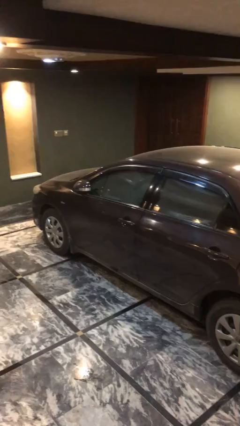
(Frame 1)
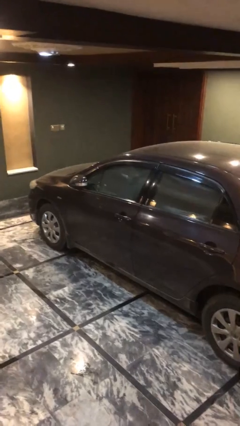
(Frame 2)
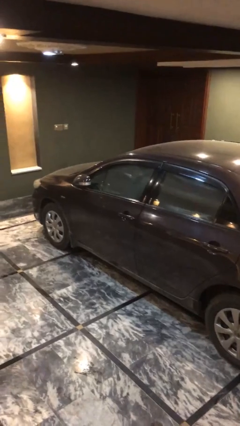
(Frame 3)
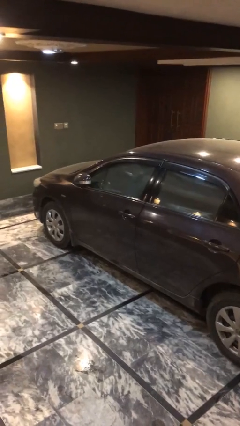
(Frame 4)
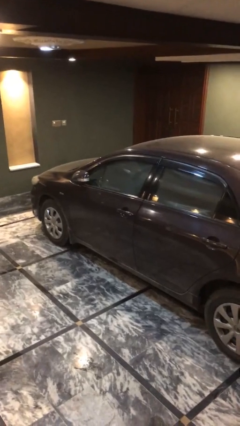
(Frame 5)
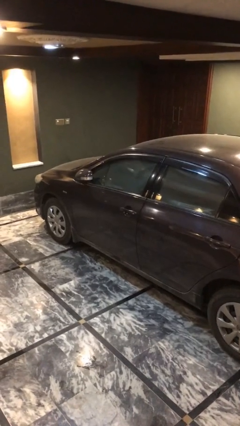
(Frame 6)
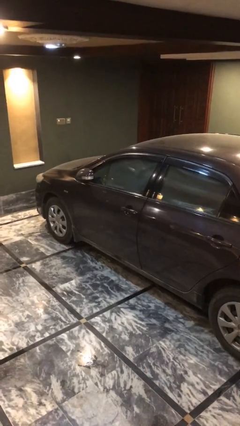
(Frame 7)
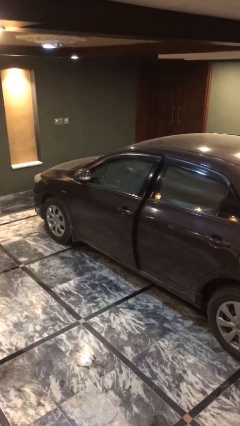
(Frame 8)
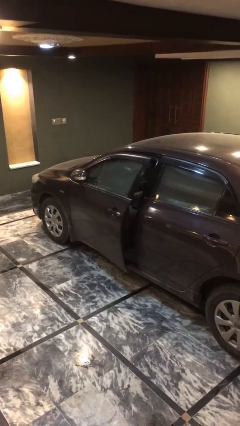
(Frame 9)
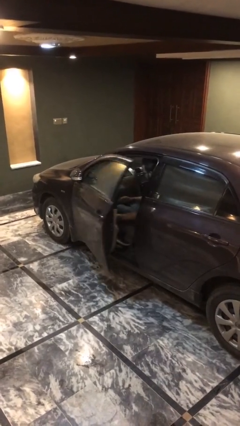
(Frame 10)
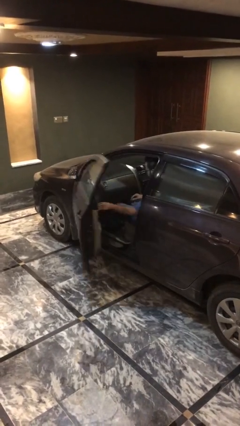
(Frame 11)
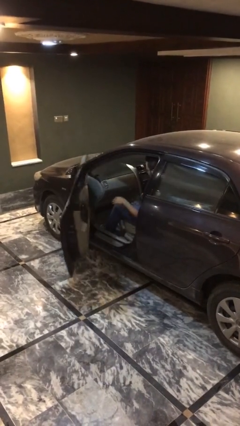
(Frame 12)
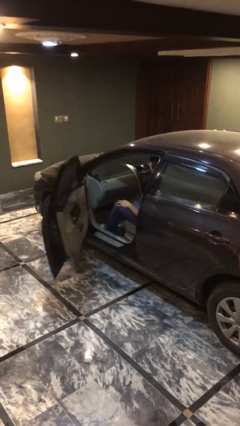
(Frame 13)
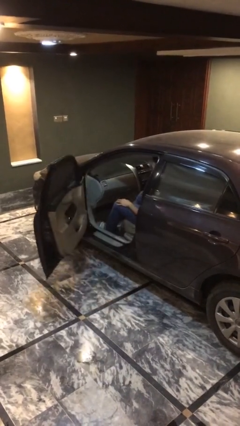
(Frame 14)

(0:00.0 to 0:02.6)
person opens car door

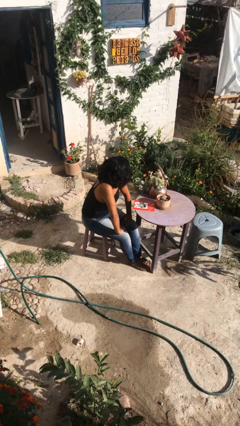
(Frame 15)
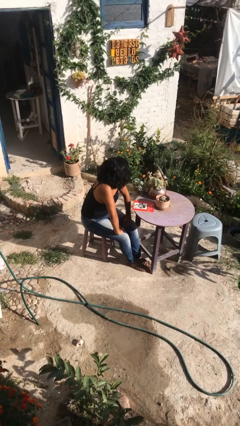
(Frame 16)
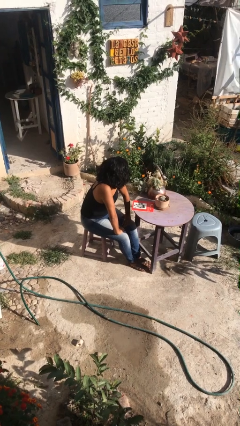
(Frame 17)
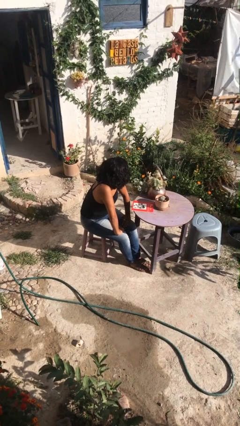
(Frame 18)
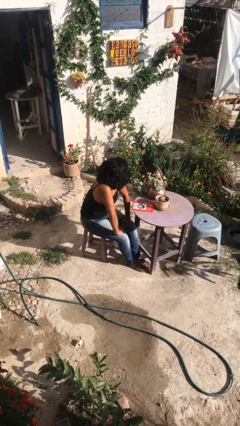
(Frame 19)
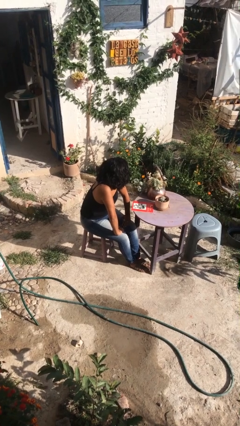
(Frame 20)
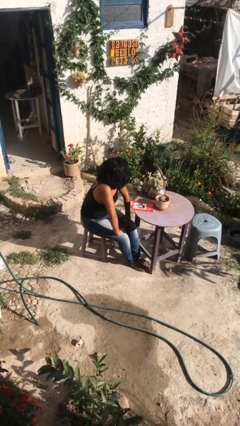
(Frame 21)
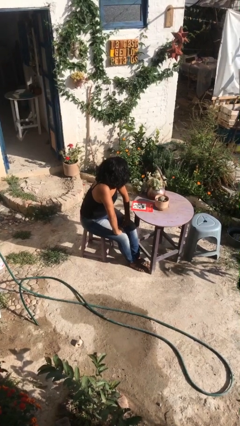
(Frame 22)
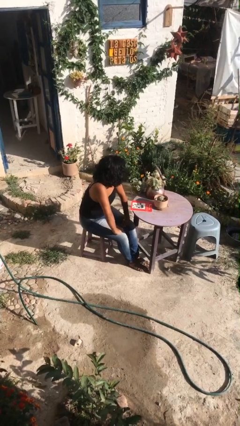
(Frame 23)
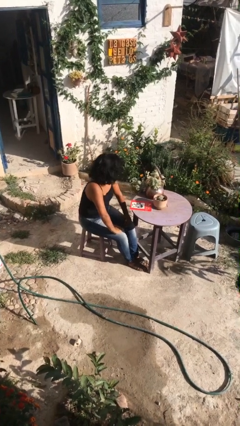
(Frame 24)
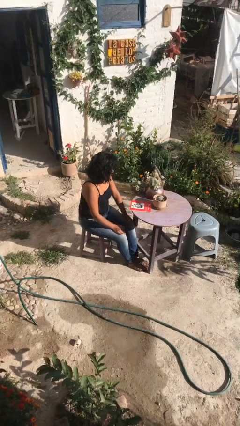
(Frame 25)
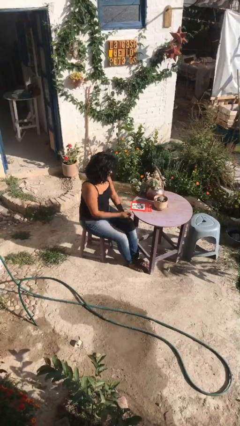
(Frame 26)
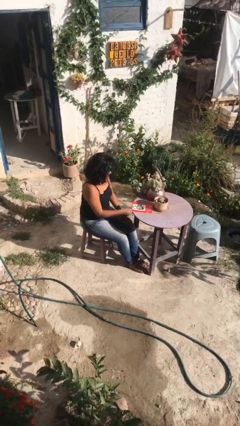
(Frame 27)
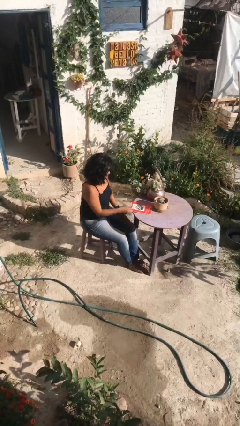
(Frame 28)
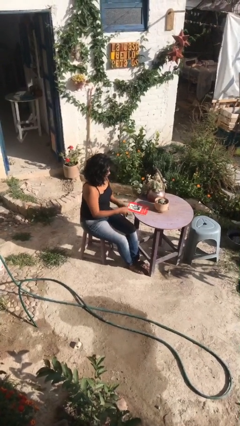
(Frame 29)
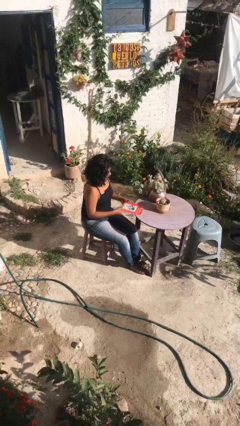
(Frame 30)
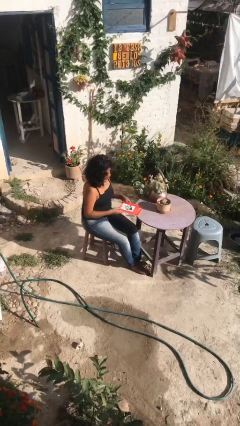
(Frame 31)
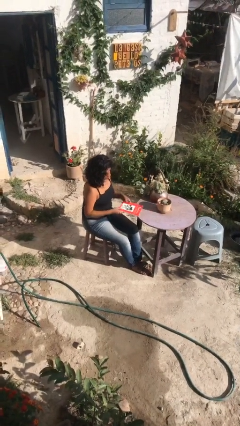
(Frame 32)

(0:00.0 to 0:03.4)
person picks up object from table

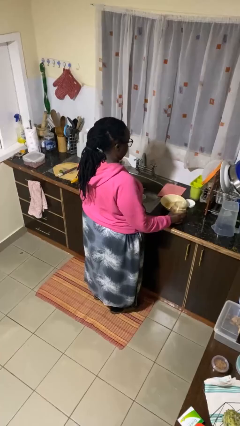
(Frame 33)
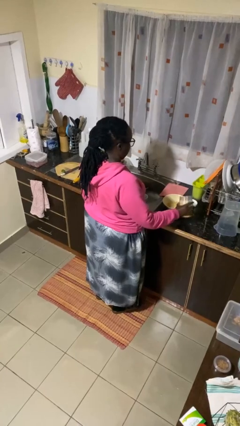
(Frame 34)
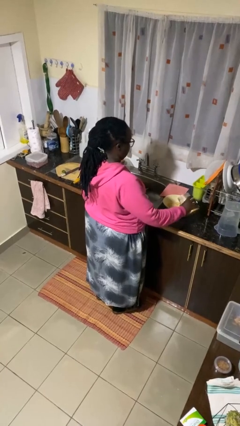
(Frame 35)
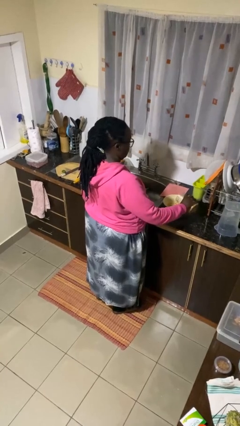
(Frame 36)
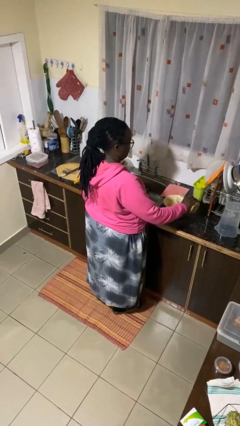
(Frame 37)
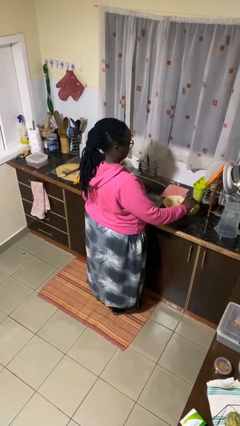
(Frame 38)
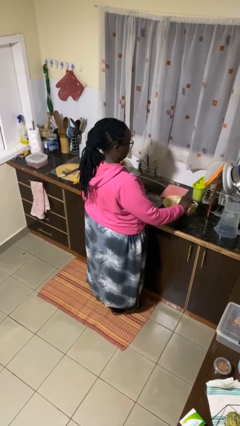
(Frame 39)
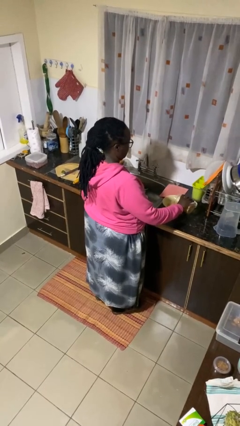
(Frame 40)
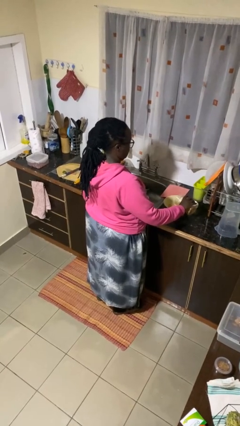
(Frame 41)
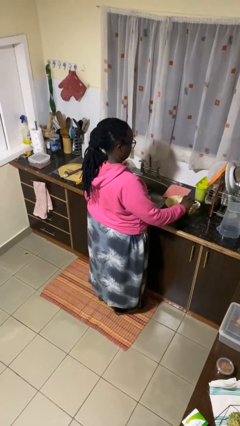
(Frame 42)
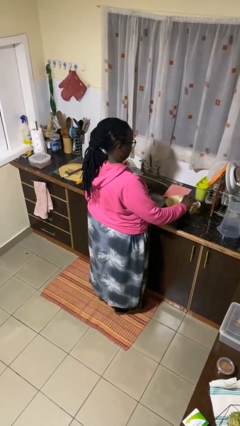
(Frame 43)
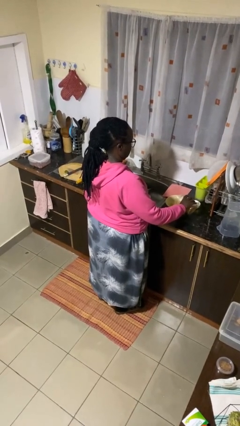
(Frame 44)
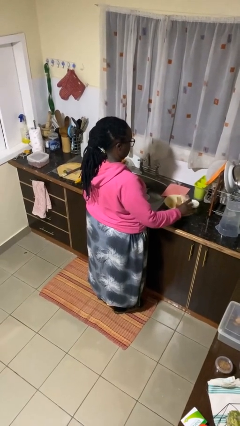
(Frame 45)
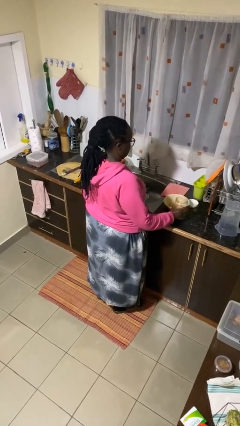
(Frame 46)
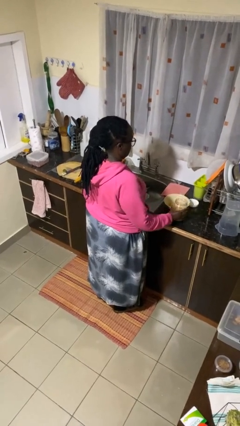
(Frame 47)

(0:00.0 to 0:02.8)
person pours into bowl

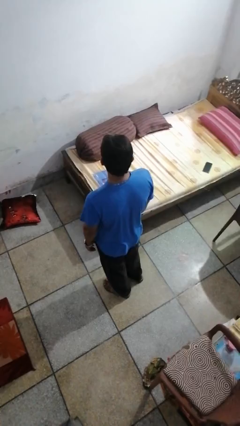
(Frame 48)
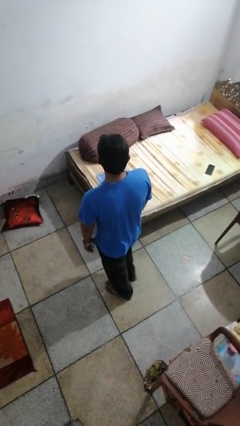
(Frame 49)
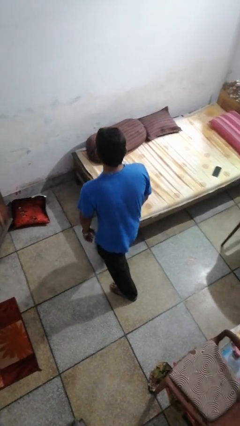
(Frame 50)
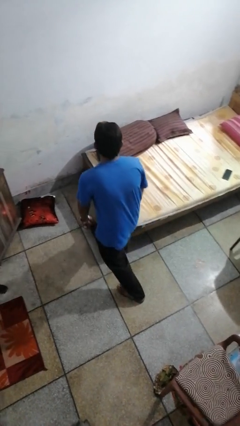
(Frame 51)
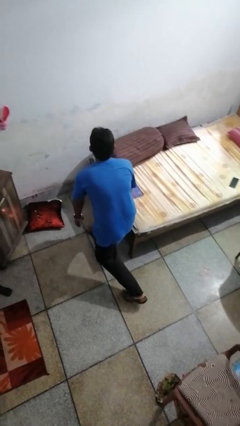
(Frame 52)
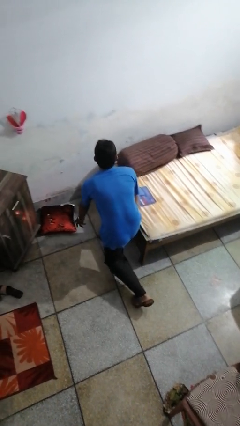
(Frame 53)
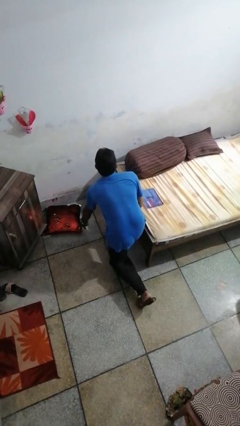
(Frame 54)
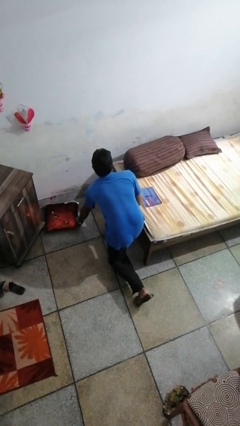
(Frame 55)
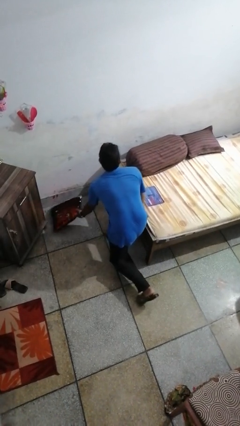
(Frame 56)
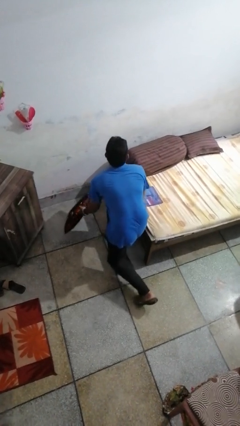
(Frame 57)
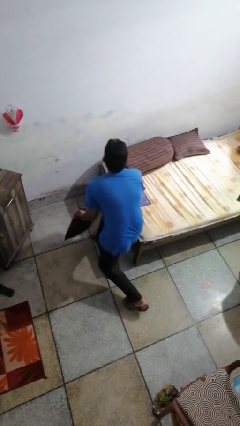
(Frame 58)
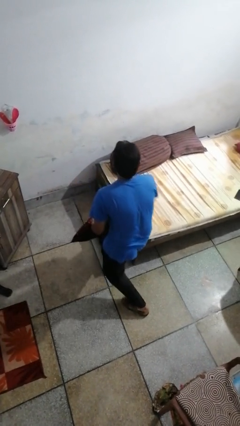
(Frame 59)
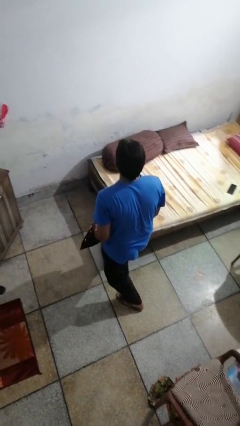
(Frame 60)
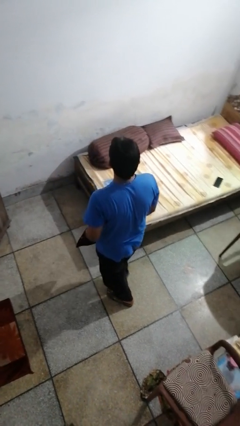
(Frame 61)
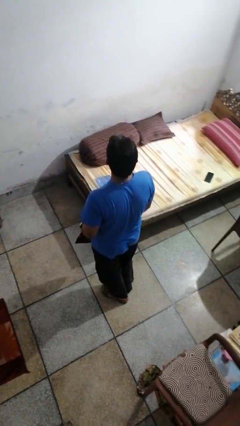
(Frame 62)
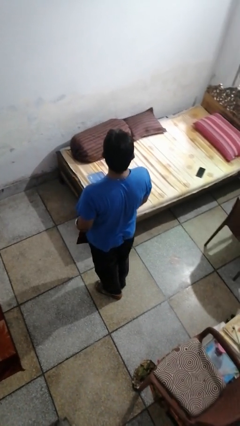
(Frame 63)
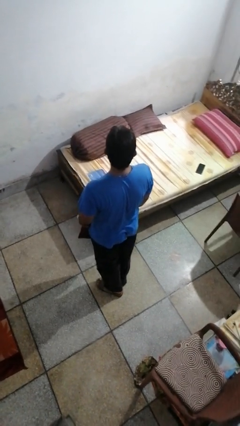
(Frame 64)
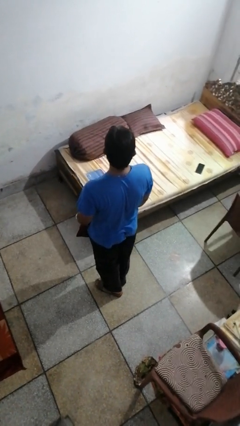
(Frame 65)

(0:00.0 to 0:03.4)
person picks up object from floor

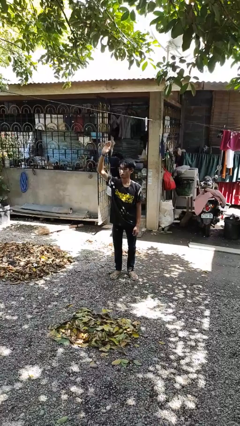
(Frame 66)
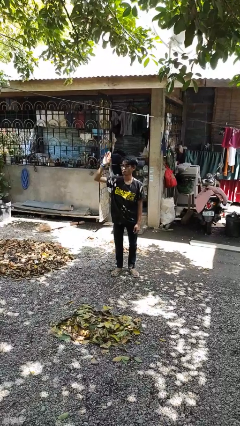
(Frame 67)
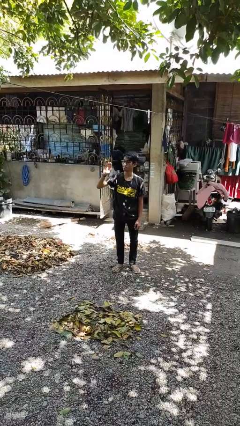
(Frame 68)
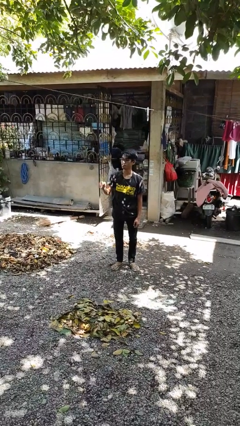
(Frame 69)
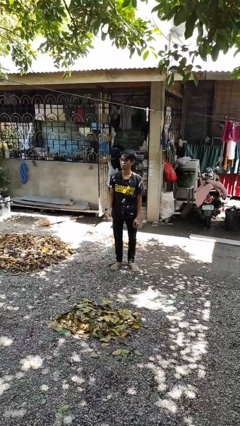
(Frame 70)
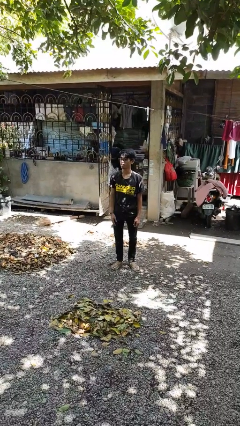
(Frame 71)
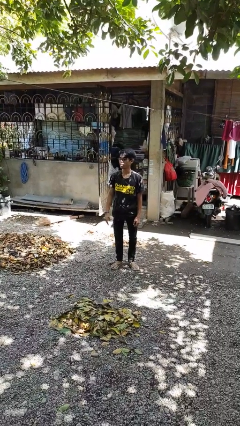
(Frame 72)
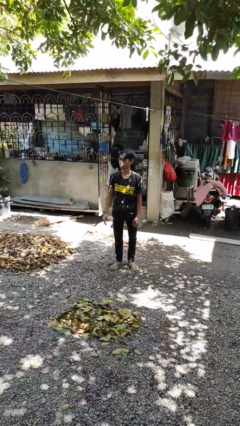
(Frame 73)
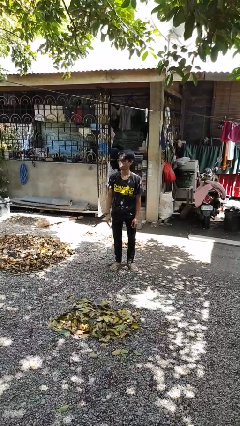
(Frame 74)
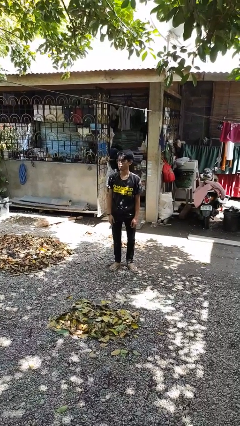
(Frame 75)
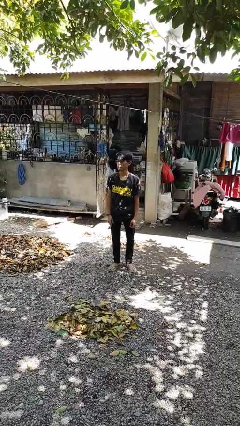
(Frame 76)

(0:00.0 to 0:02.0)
person gestures lower hand

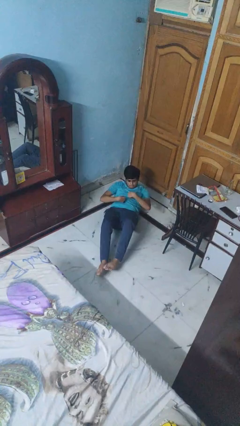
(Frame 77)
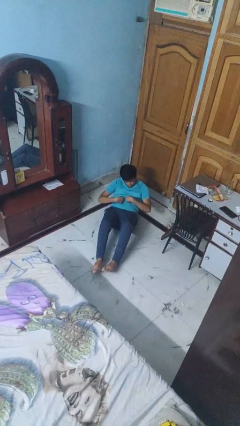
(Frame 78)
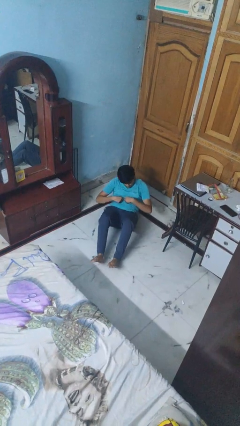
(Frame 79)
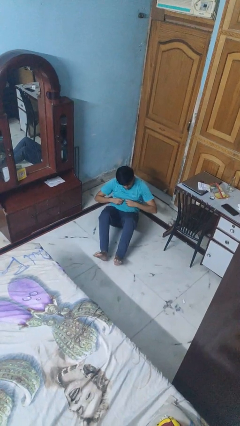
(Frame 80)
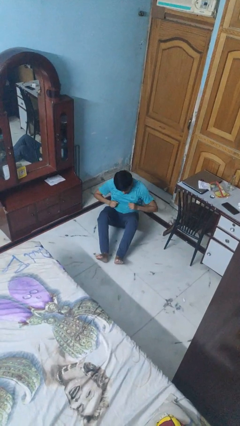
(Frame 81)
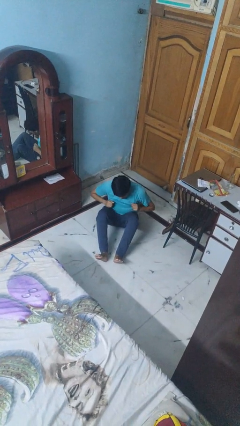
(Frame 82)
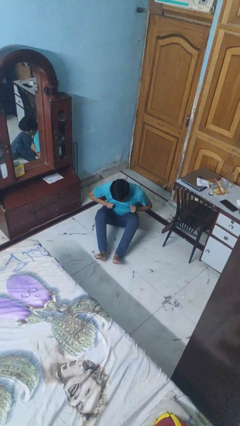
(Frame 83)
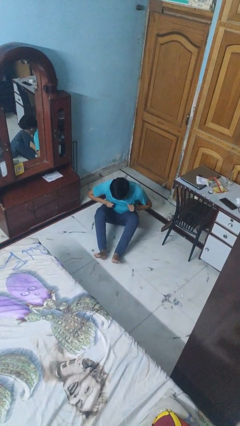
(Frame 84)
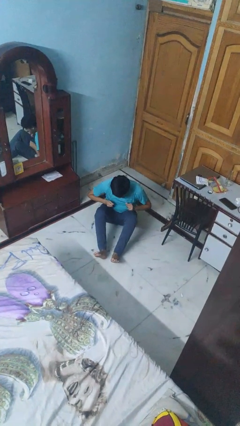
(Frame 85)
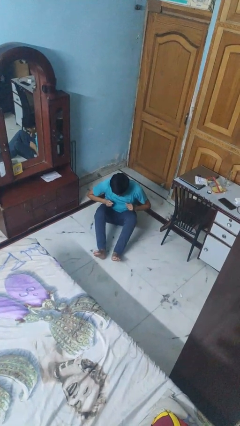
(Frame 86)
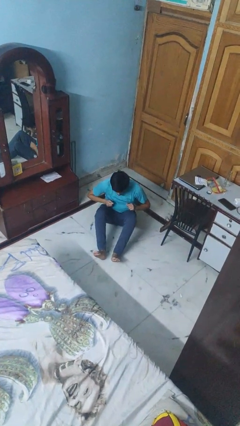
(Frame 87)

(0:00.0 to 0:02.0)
person exercises with situp

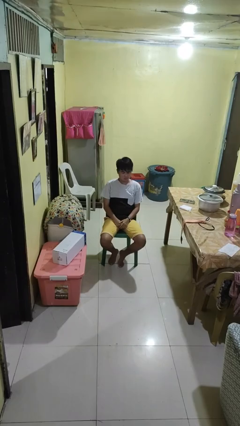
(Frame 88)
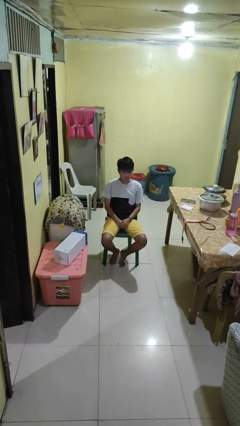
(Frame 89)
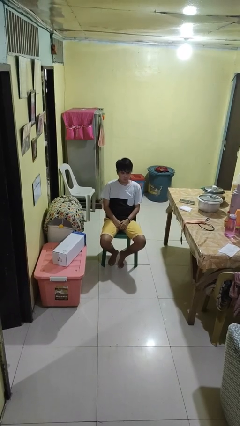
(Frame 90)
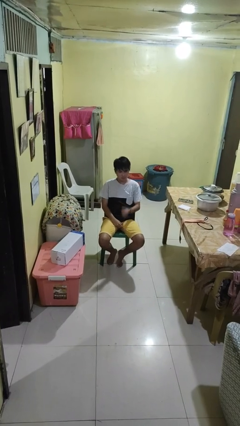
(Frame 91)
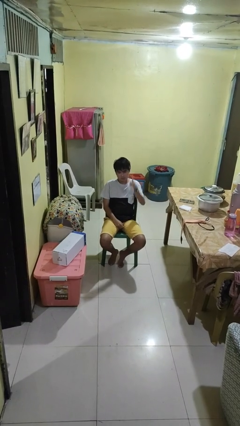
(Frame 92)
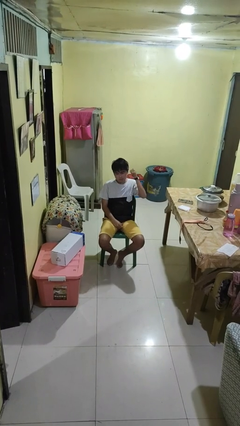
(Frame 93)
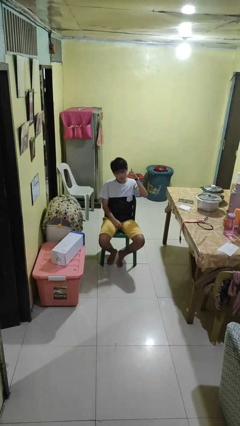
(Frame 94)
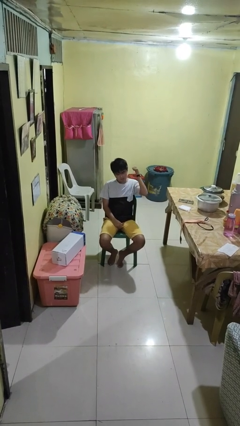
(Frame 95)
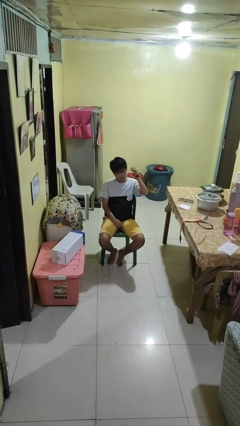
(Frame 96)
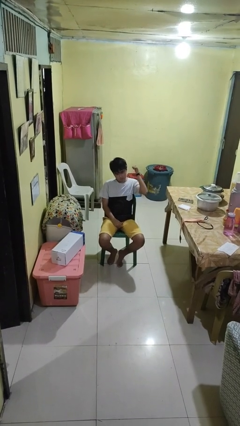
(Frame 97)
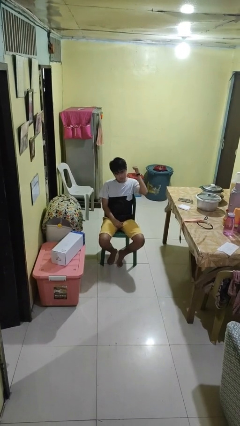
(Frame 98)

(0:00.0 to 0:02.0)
person gestures behind me
